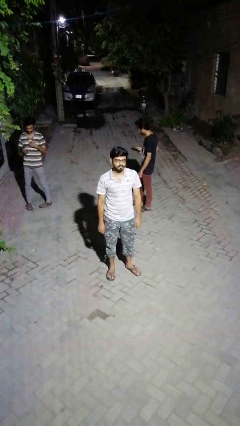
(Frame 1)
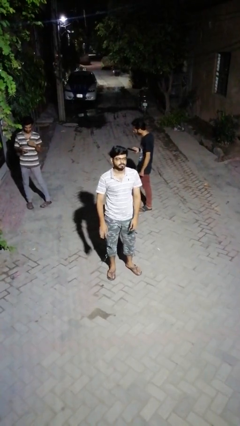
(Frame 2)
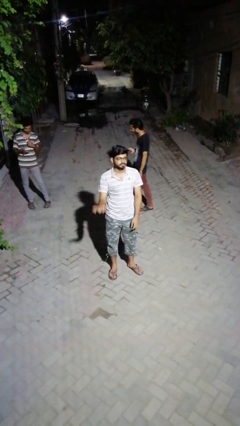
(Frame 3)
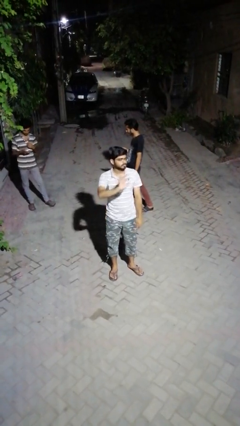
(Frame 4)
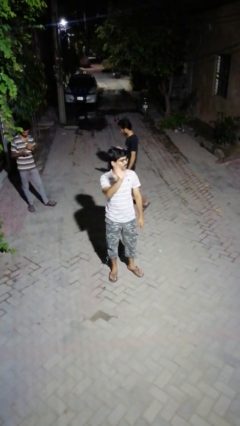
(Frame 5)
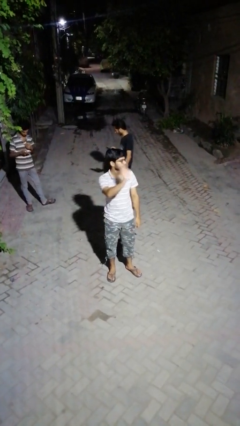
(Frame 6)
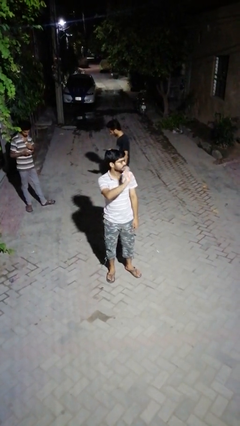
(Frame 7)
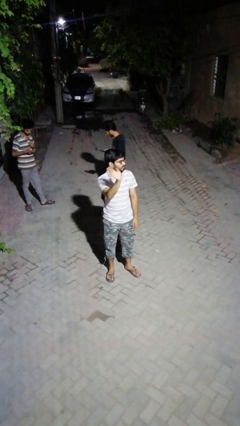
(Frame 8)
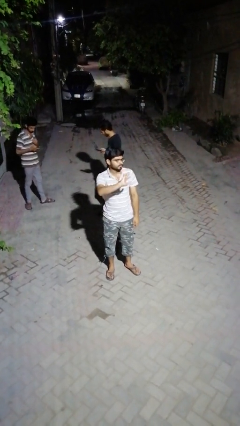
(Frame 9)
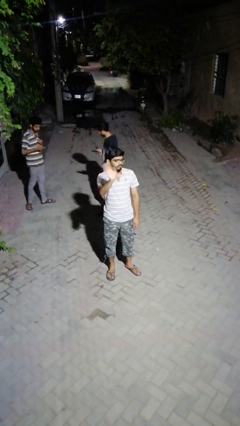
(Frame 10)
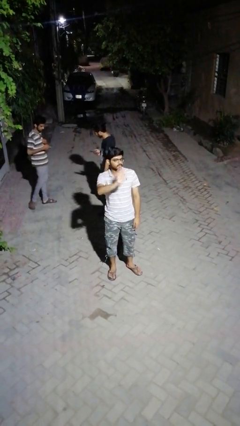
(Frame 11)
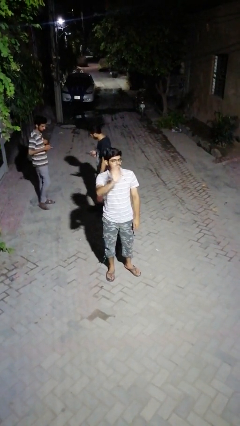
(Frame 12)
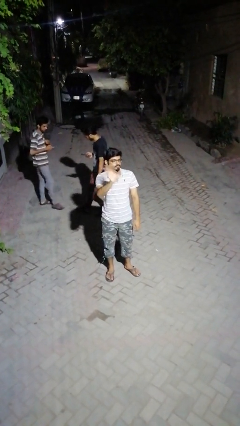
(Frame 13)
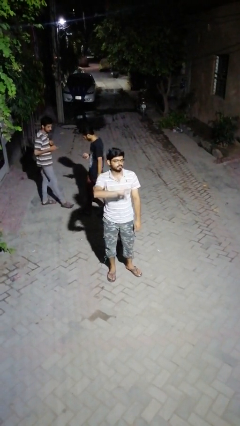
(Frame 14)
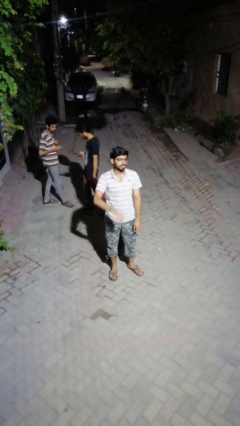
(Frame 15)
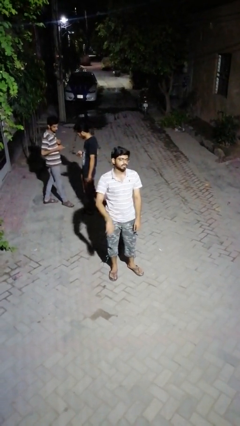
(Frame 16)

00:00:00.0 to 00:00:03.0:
person waves at person

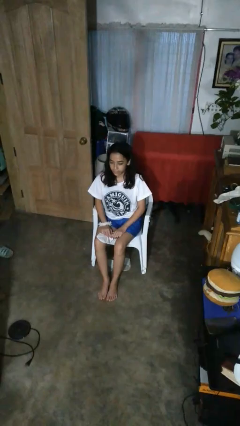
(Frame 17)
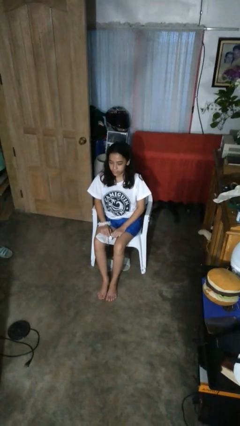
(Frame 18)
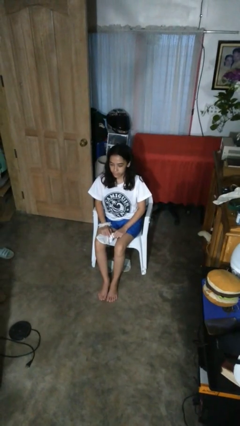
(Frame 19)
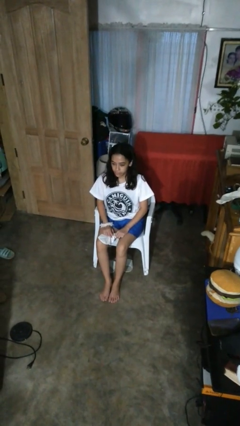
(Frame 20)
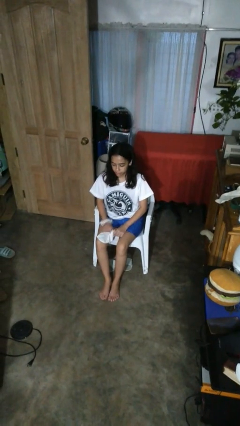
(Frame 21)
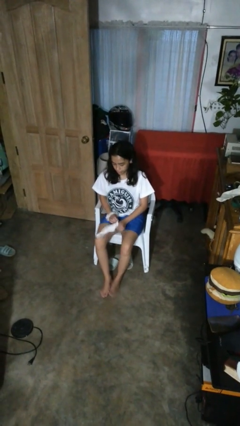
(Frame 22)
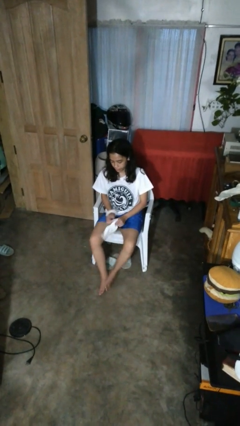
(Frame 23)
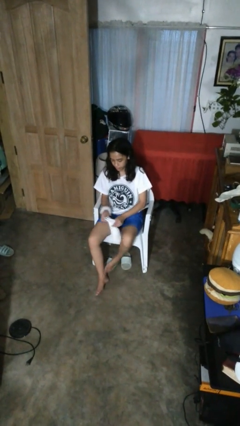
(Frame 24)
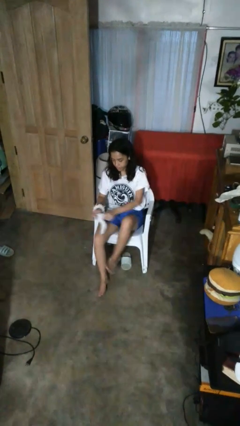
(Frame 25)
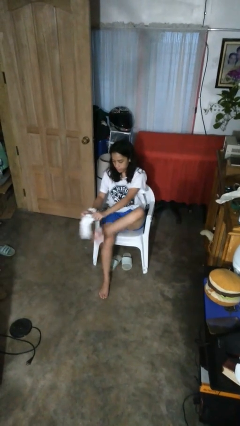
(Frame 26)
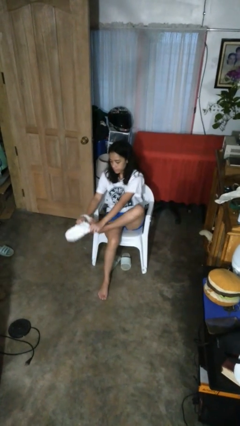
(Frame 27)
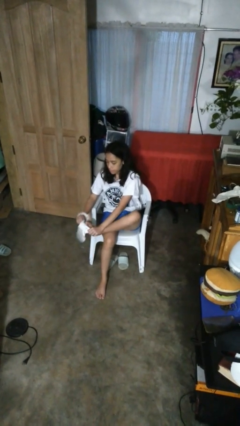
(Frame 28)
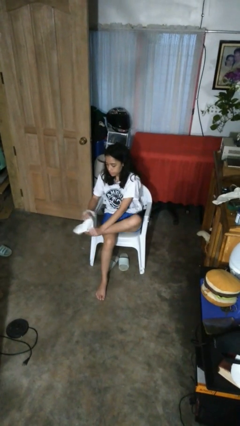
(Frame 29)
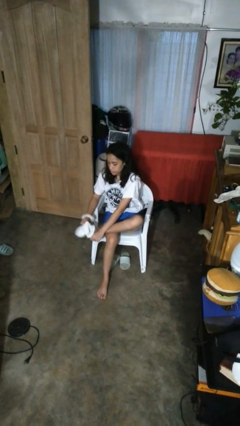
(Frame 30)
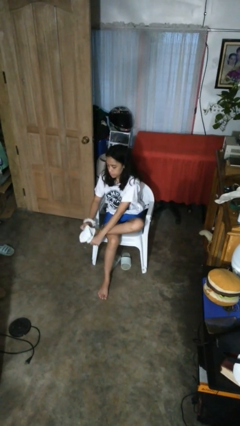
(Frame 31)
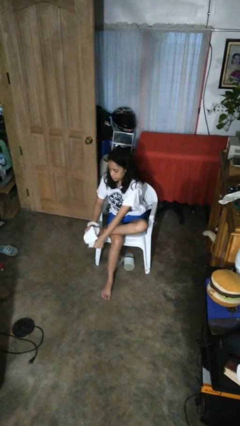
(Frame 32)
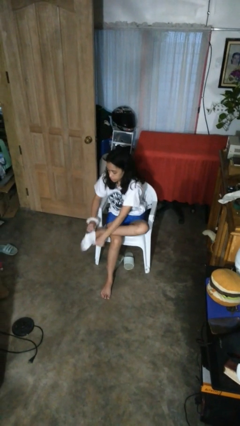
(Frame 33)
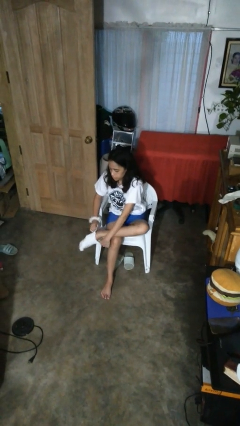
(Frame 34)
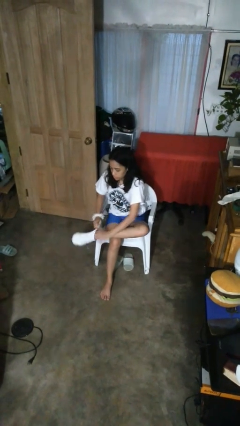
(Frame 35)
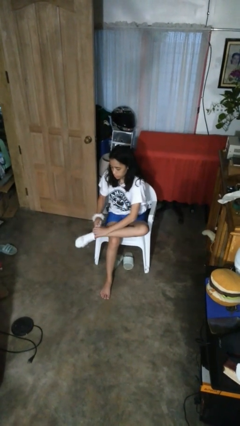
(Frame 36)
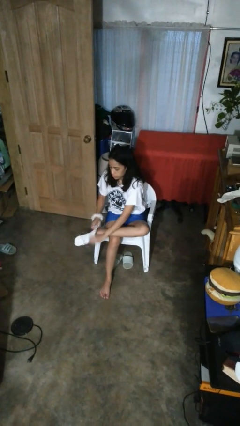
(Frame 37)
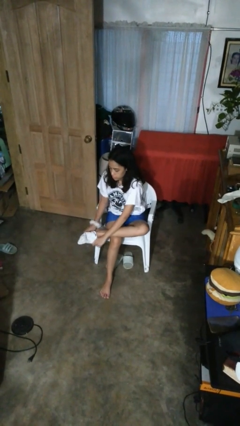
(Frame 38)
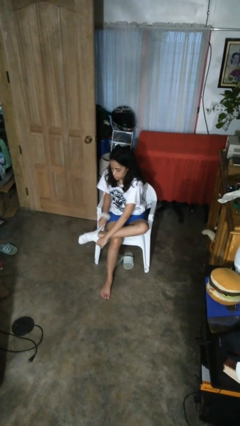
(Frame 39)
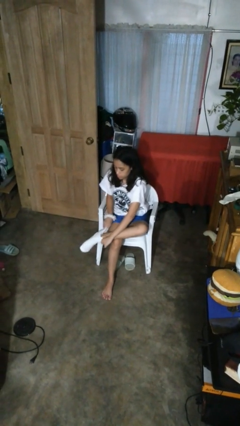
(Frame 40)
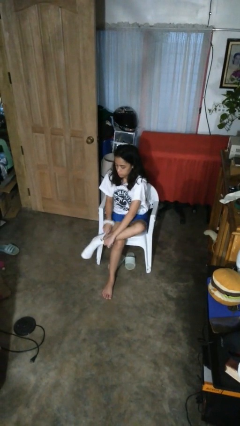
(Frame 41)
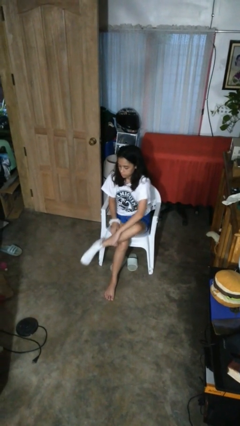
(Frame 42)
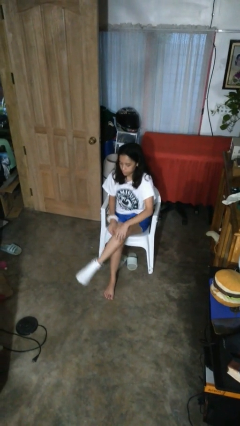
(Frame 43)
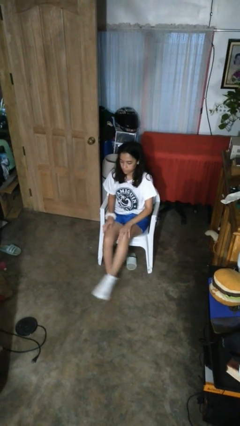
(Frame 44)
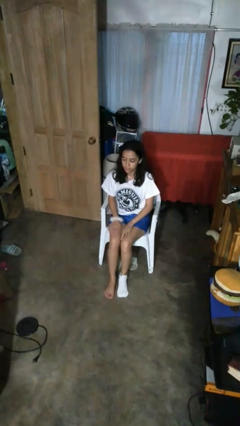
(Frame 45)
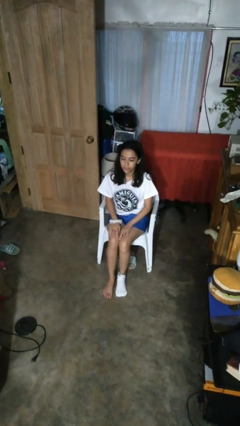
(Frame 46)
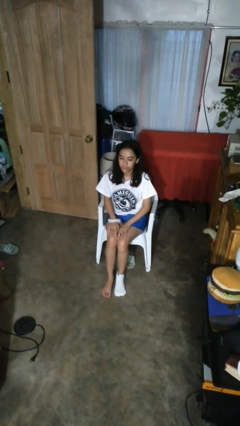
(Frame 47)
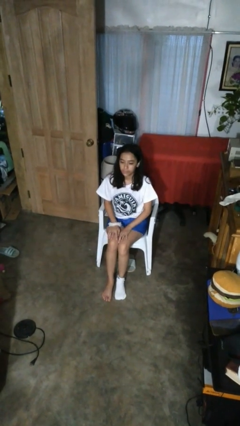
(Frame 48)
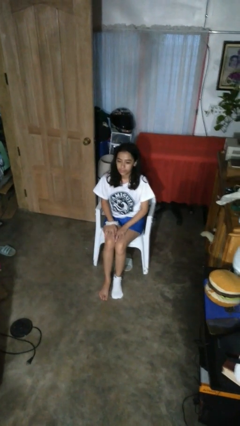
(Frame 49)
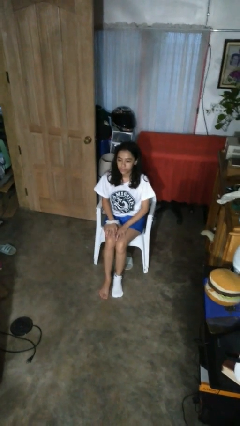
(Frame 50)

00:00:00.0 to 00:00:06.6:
person puts on socks

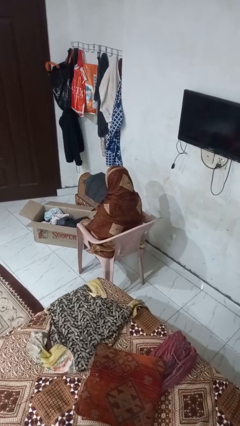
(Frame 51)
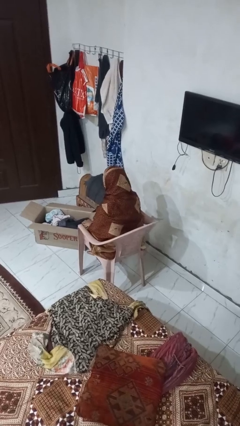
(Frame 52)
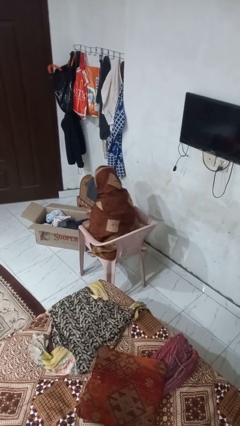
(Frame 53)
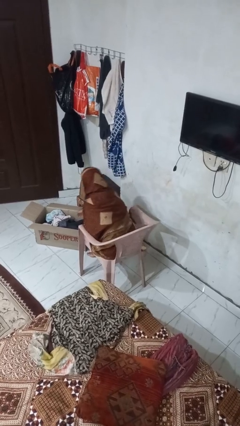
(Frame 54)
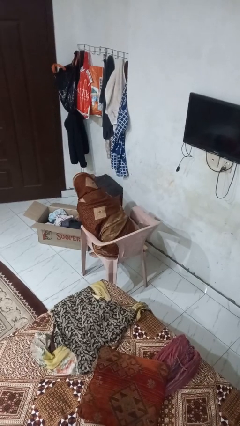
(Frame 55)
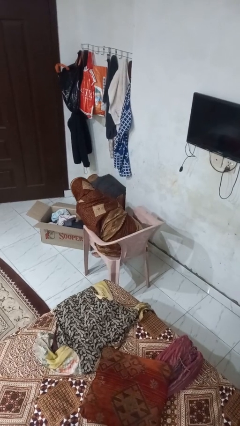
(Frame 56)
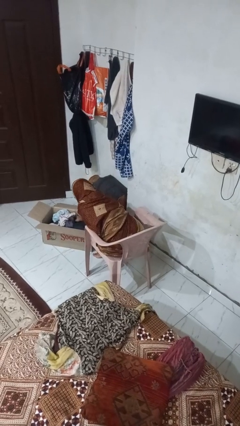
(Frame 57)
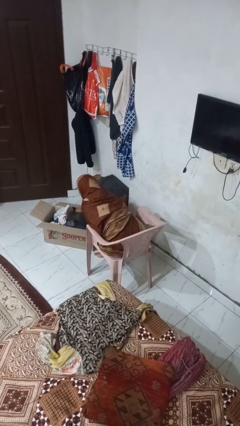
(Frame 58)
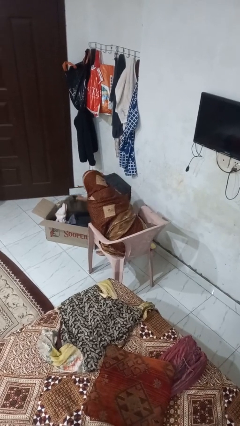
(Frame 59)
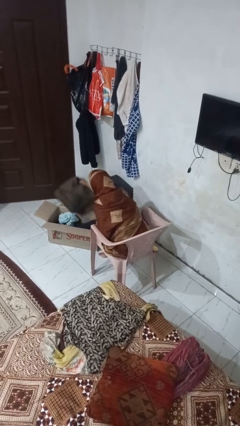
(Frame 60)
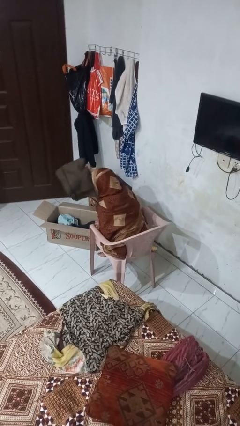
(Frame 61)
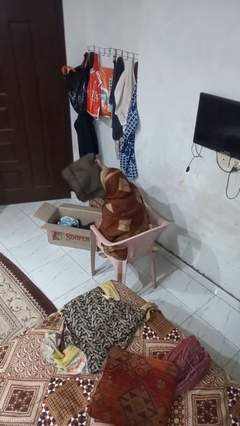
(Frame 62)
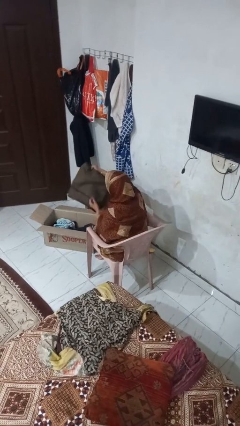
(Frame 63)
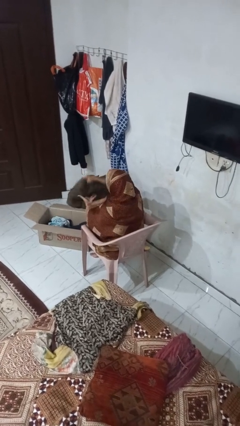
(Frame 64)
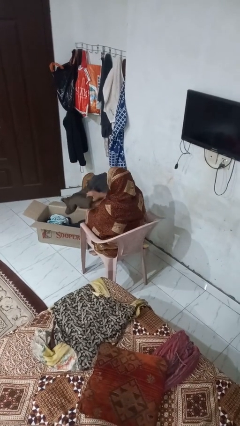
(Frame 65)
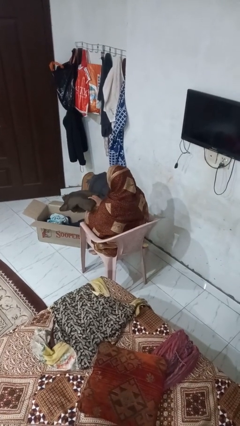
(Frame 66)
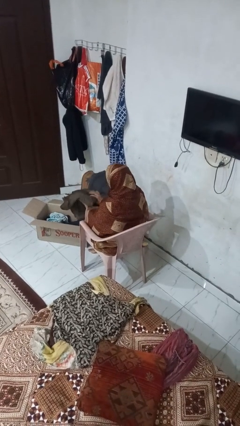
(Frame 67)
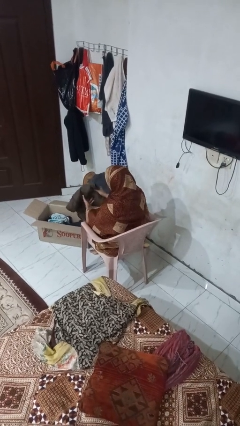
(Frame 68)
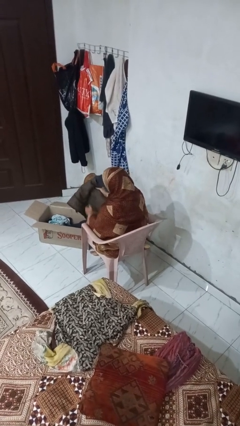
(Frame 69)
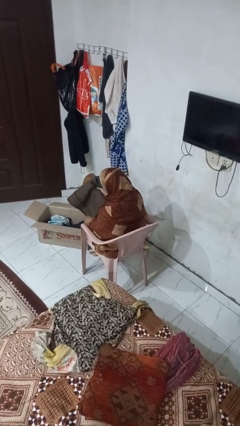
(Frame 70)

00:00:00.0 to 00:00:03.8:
person takes object from box

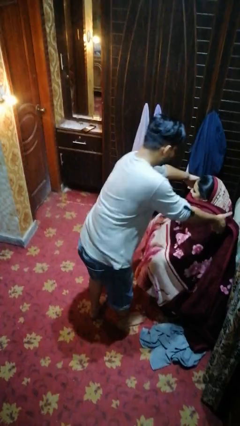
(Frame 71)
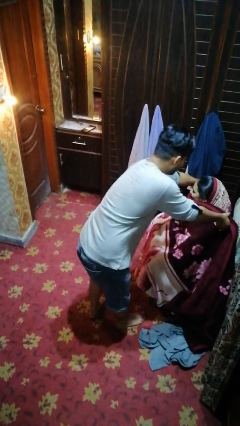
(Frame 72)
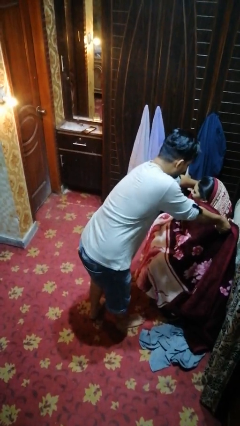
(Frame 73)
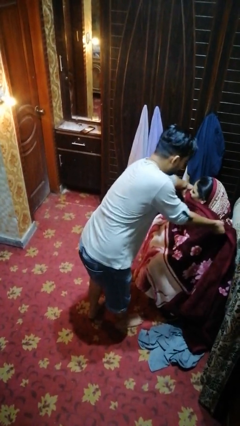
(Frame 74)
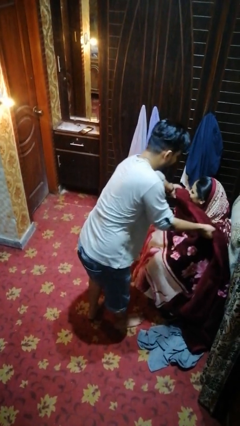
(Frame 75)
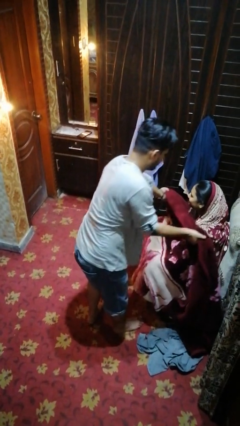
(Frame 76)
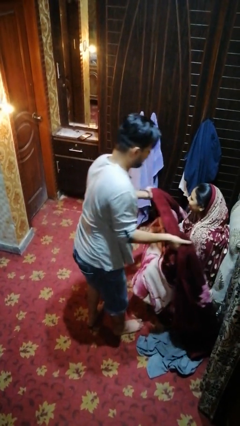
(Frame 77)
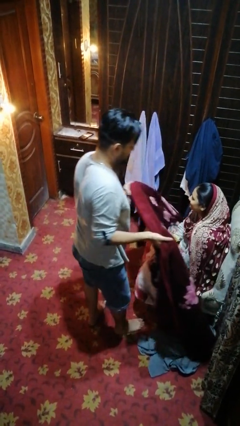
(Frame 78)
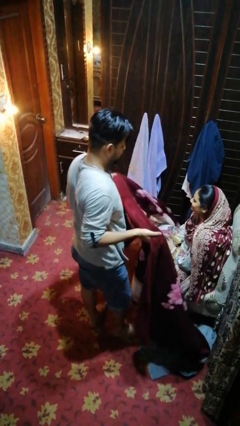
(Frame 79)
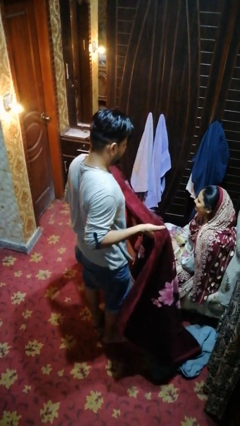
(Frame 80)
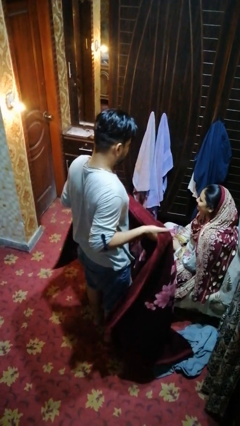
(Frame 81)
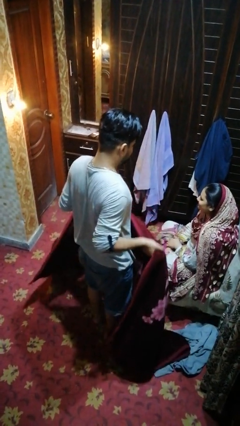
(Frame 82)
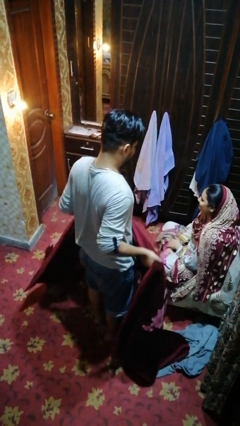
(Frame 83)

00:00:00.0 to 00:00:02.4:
person uncovers friend with blanket

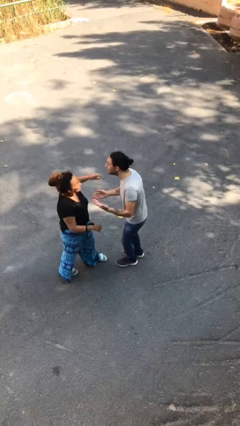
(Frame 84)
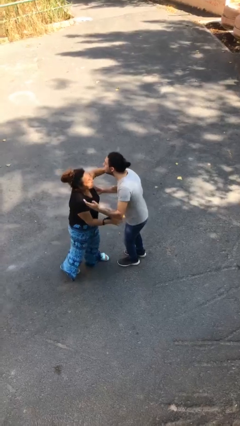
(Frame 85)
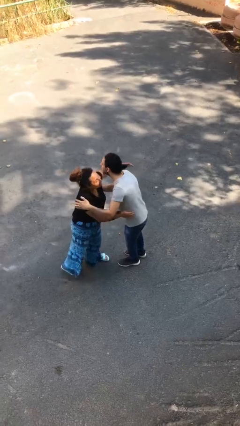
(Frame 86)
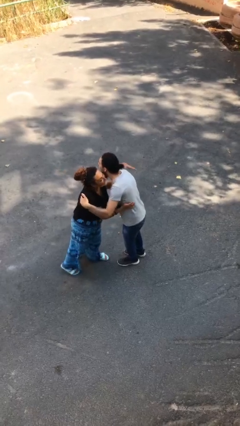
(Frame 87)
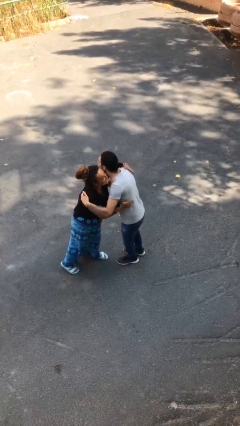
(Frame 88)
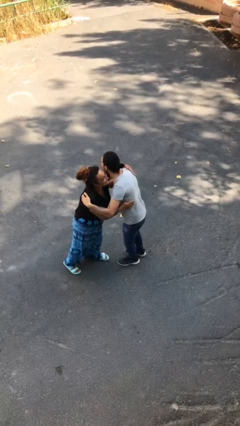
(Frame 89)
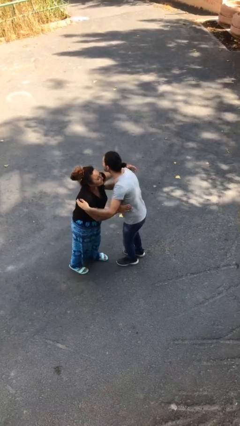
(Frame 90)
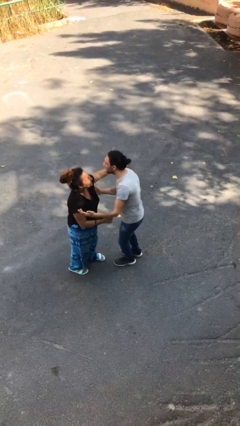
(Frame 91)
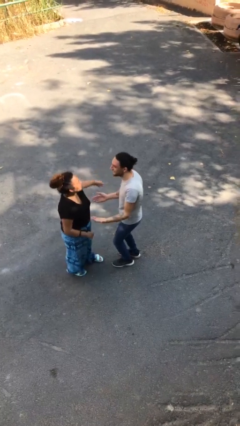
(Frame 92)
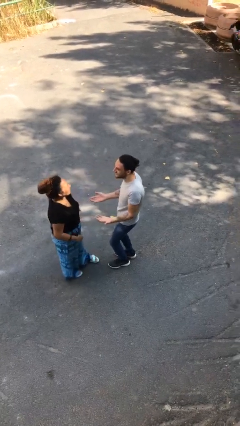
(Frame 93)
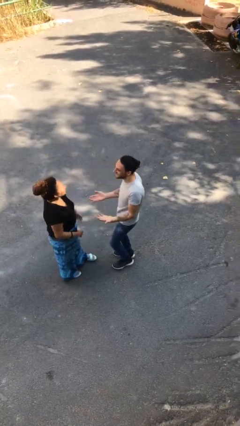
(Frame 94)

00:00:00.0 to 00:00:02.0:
person embraces person
